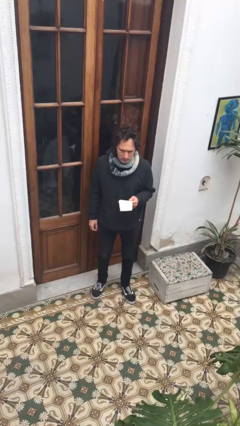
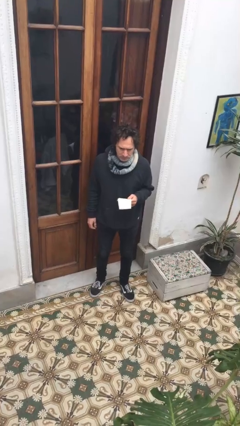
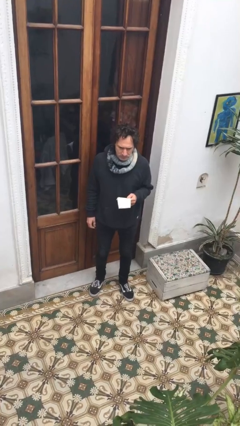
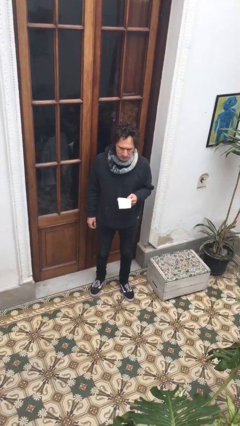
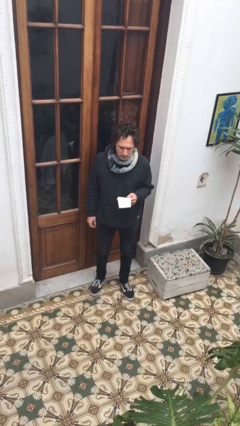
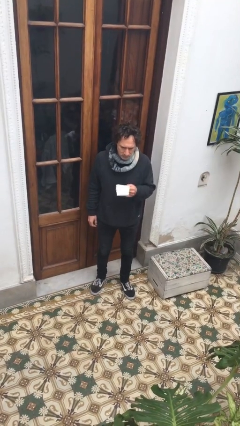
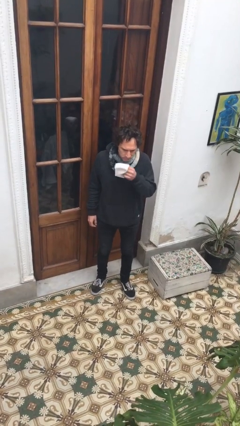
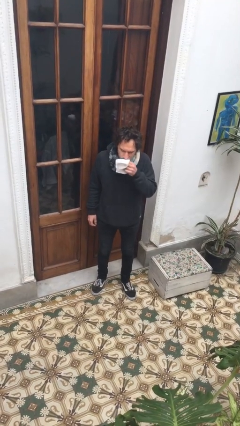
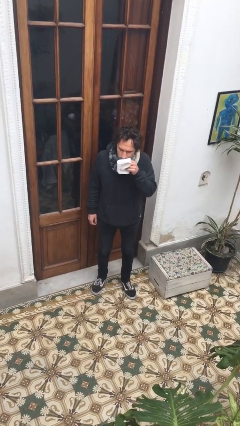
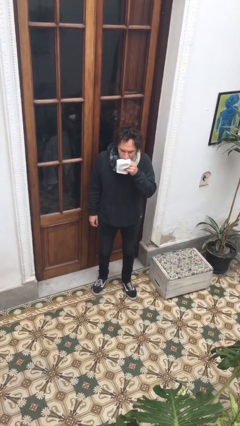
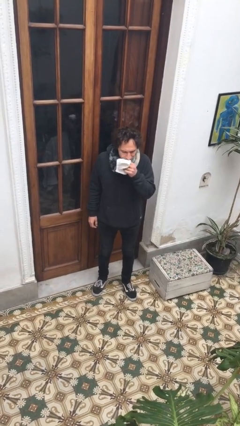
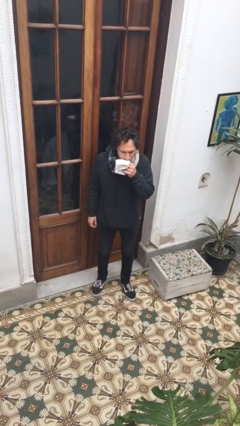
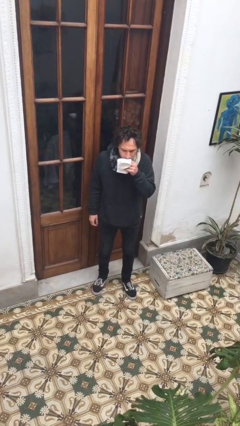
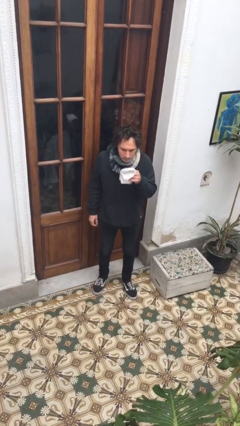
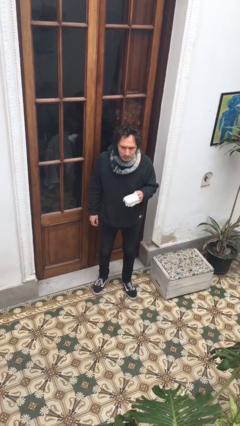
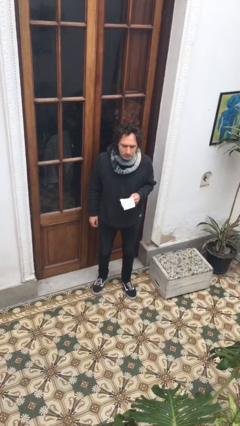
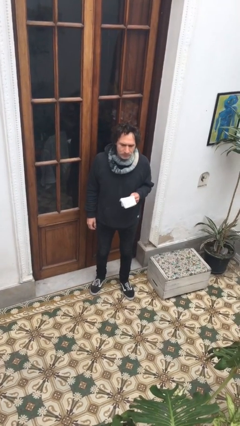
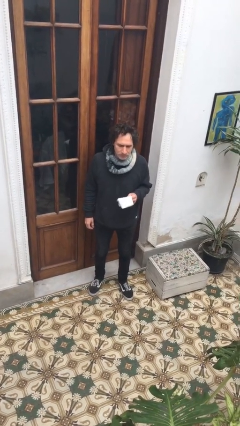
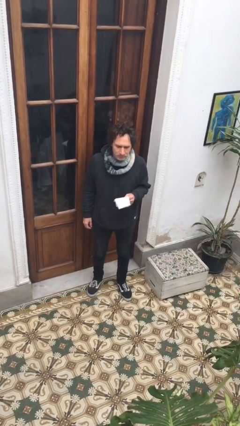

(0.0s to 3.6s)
person wipes mouth with napkin

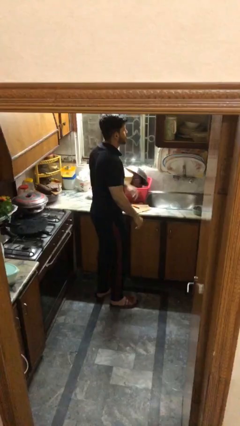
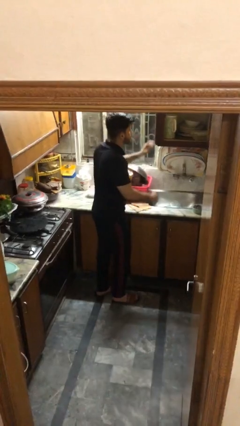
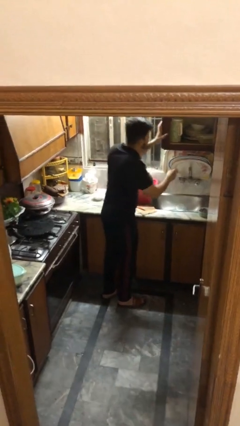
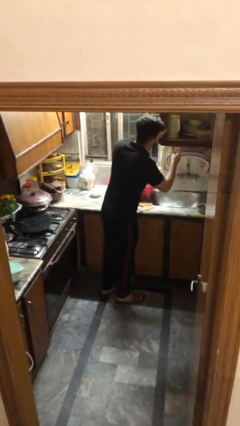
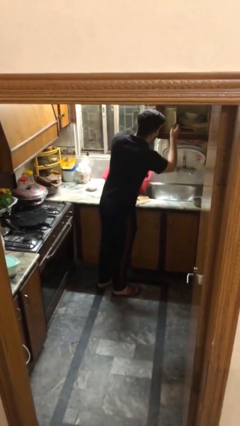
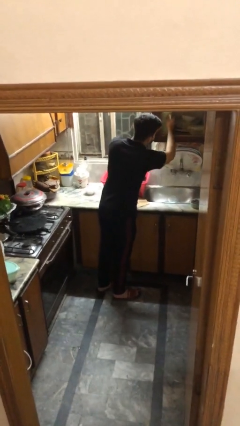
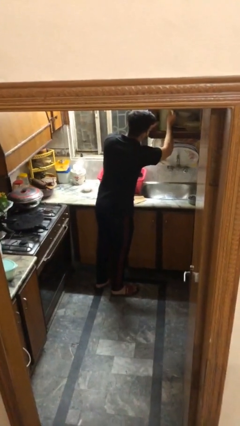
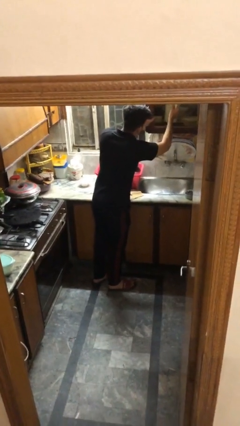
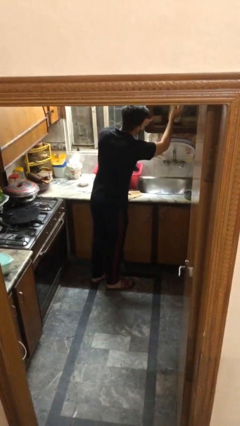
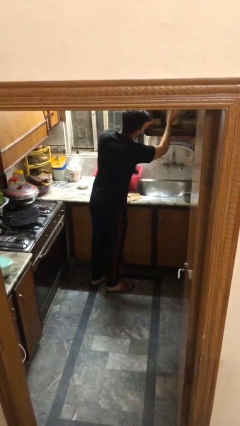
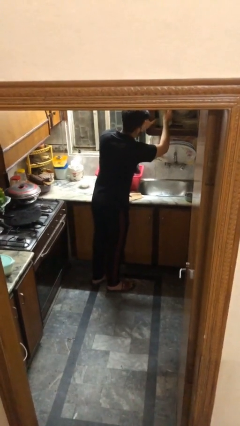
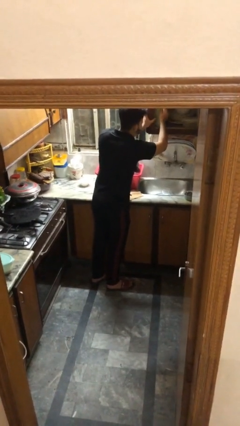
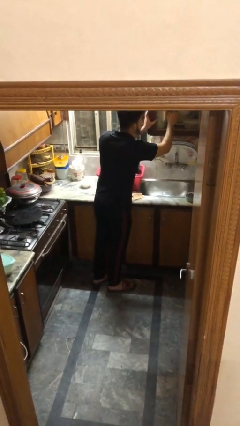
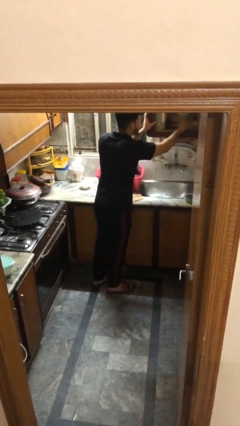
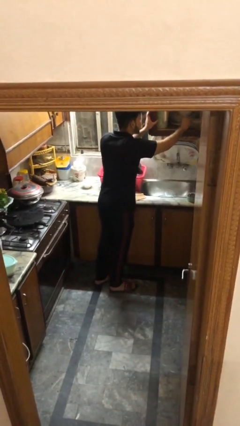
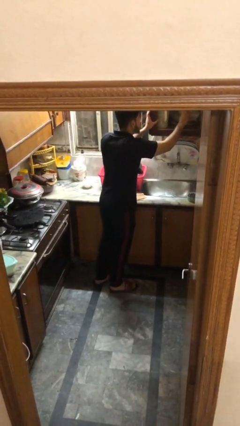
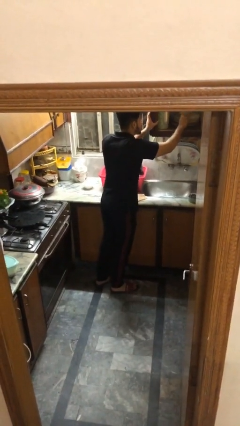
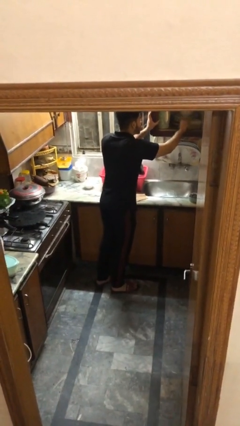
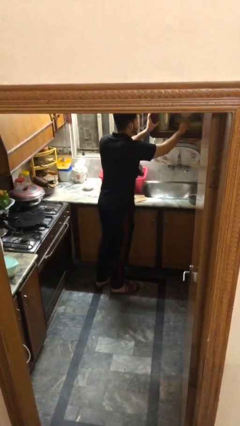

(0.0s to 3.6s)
person searches in kitchen drawer

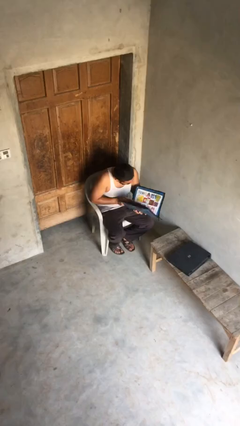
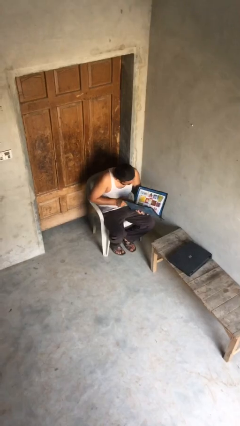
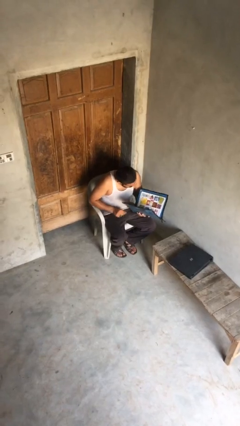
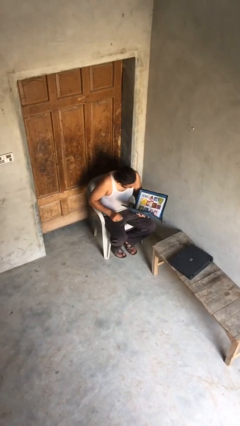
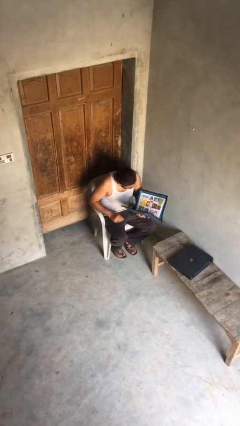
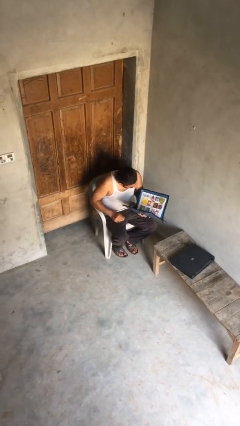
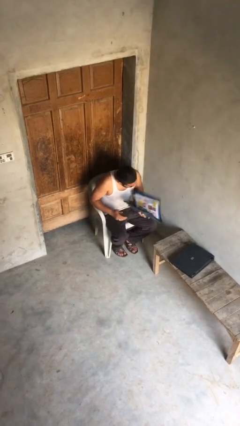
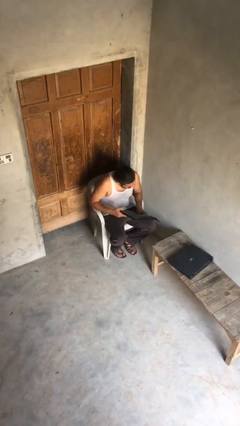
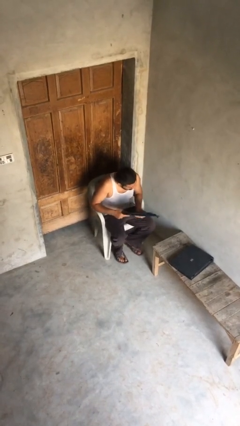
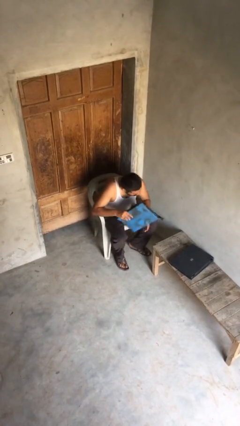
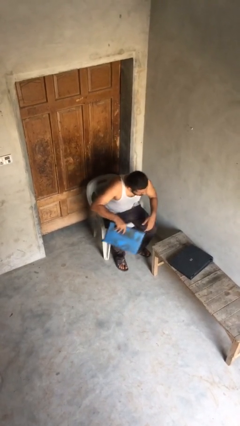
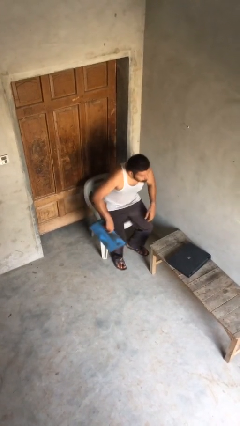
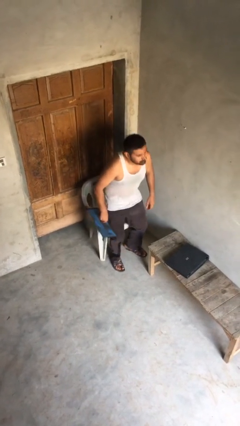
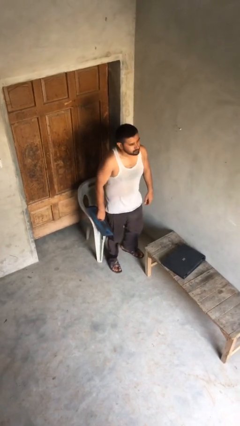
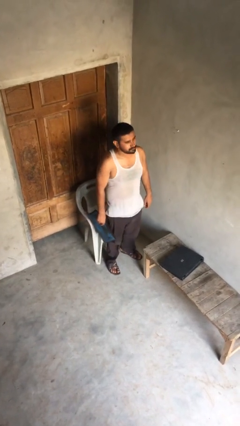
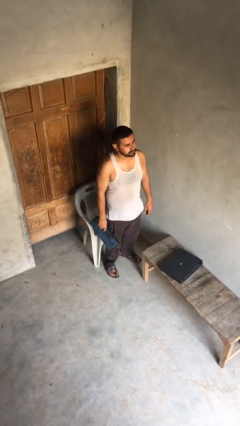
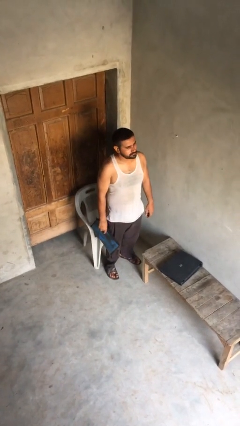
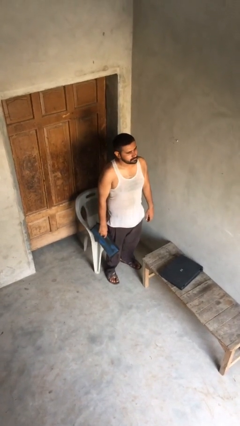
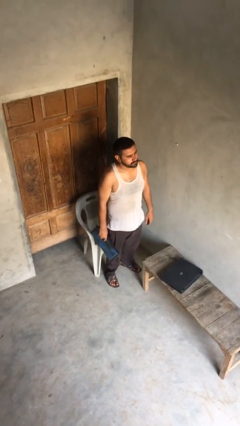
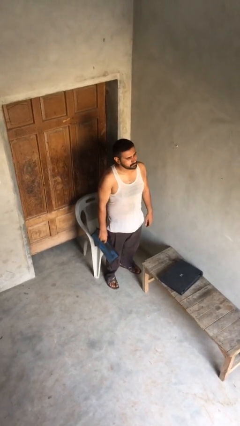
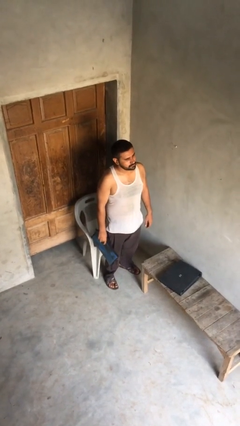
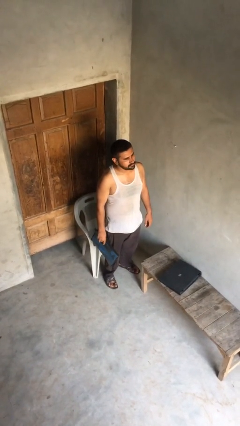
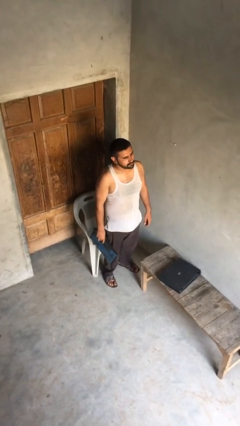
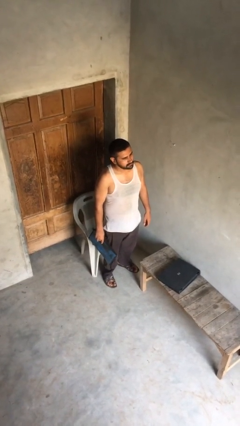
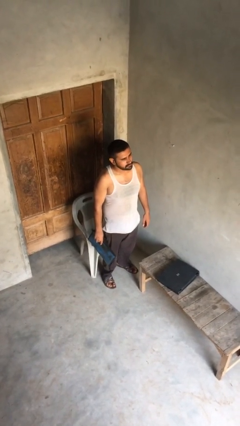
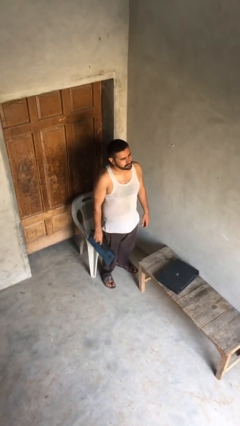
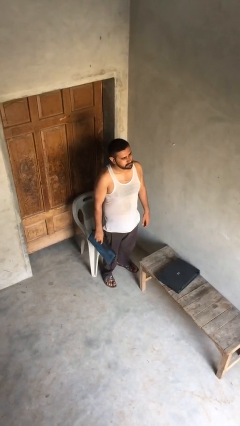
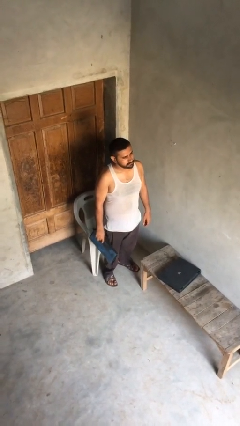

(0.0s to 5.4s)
person stands up

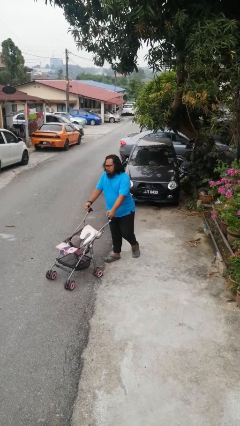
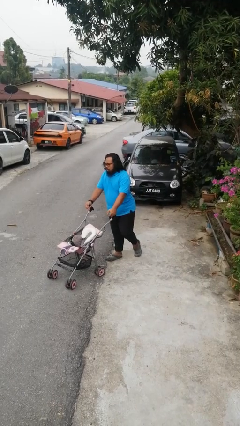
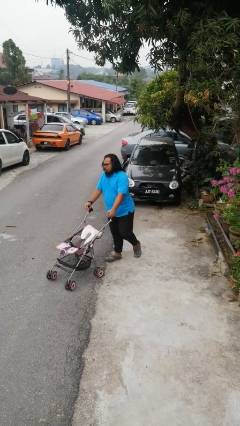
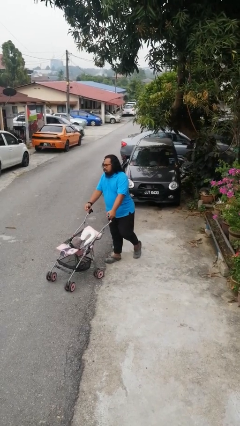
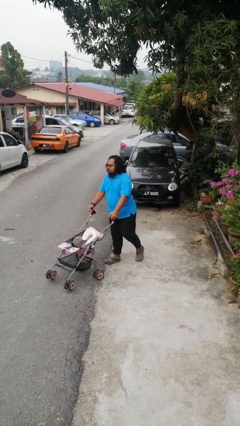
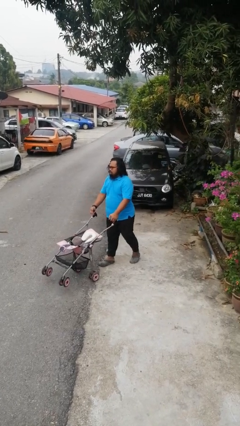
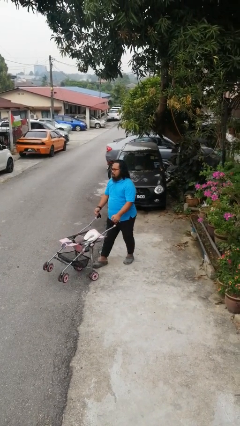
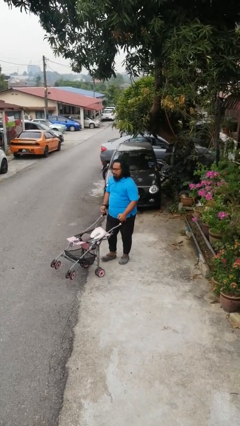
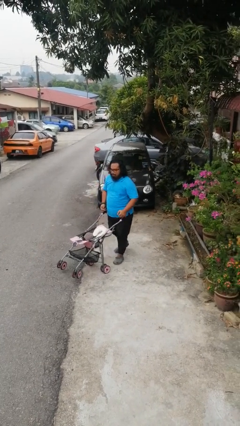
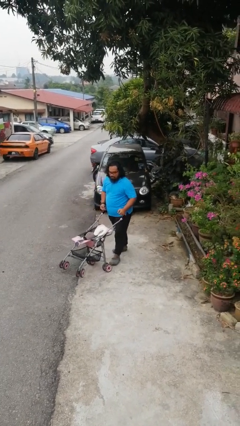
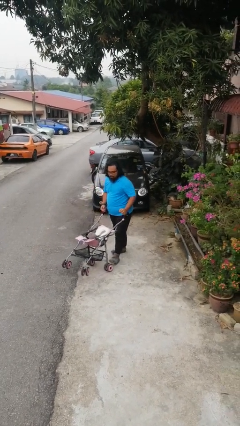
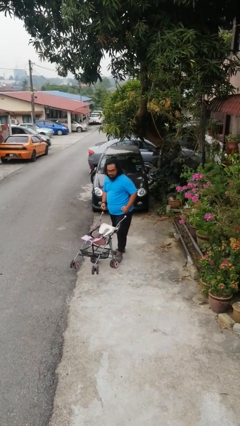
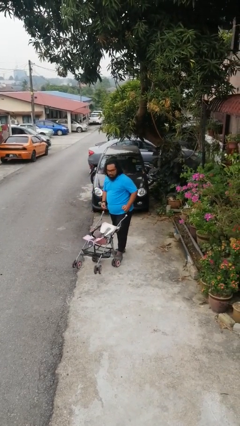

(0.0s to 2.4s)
person pulls wheeled cart

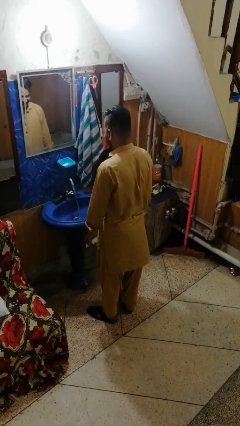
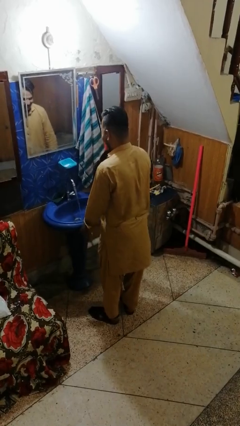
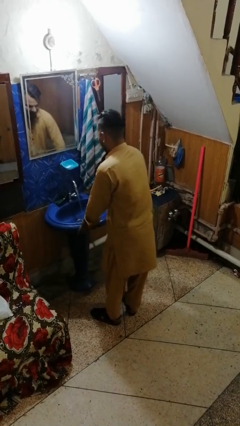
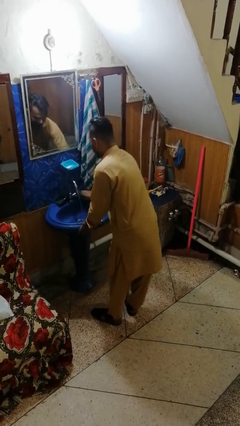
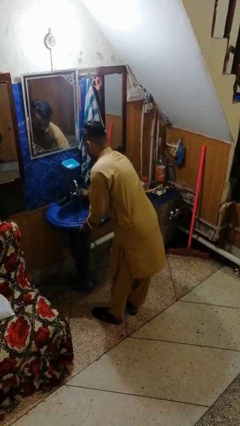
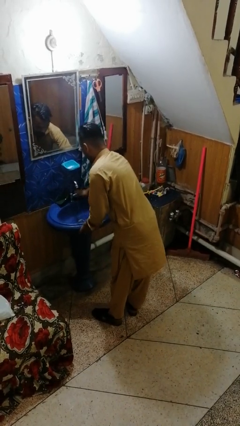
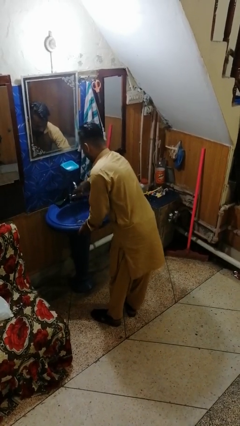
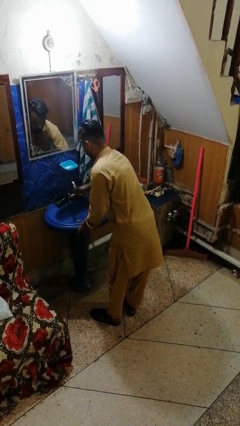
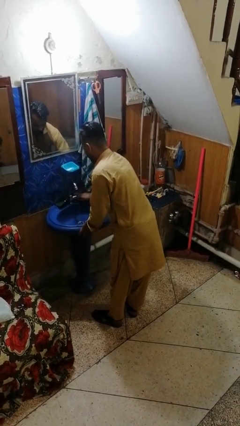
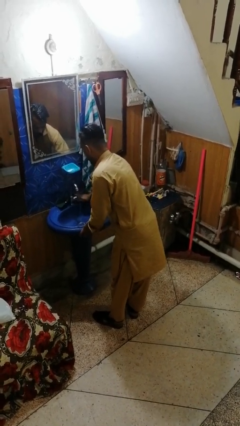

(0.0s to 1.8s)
person turns off faucet

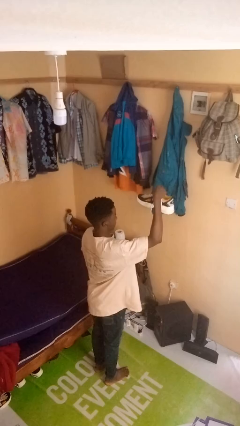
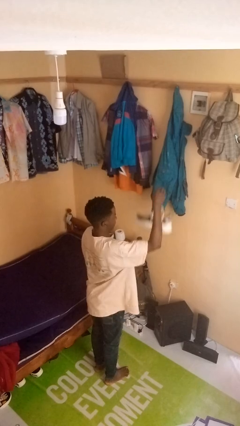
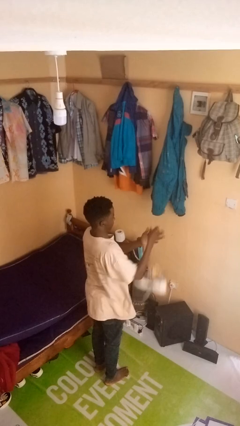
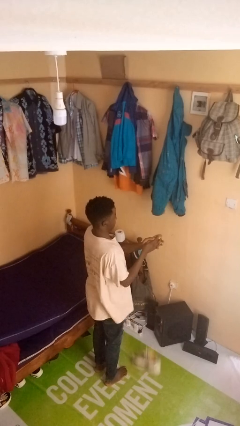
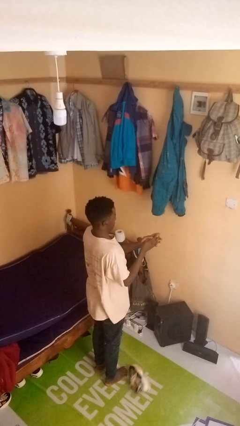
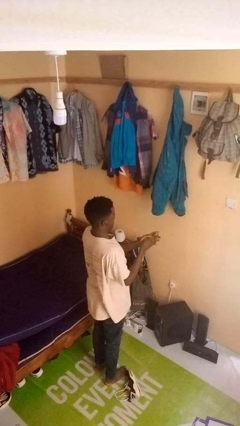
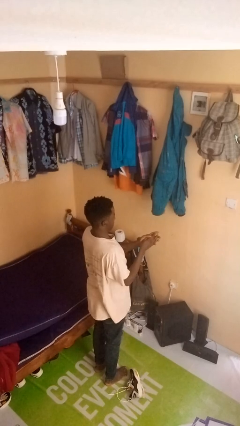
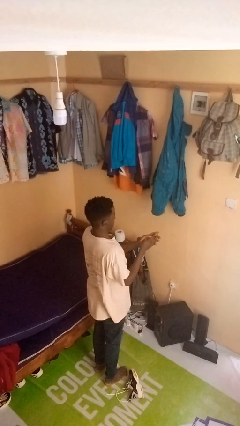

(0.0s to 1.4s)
person drops object
